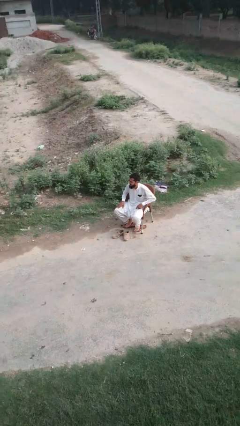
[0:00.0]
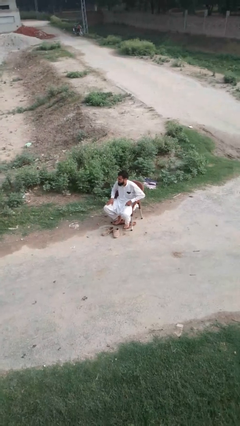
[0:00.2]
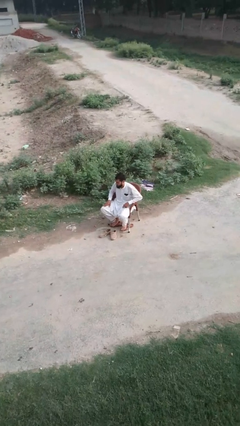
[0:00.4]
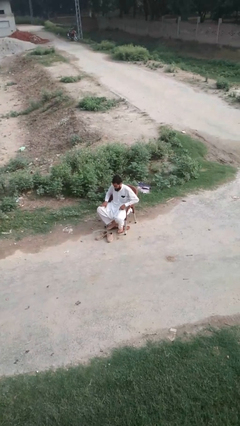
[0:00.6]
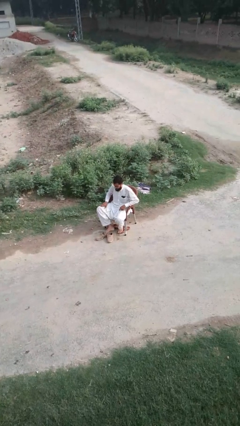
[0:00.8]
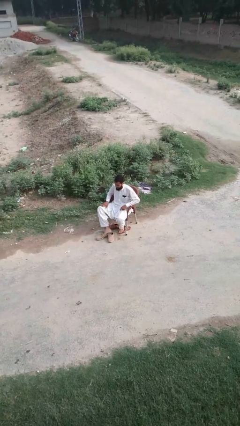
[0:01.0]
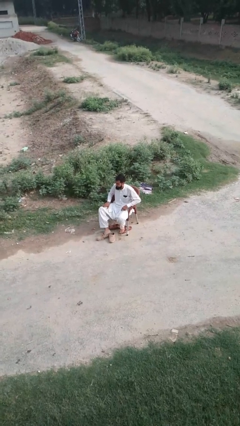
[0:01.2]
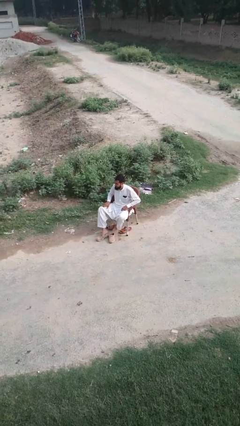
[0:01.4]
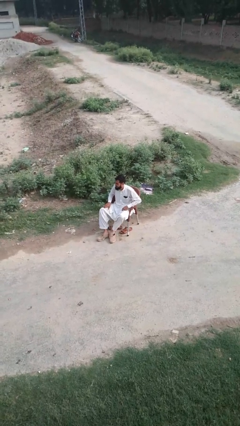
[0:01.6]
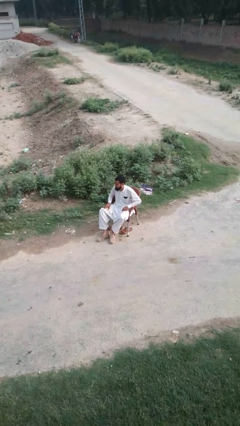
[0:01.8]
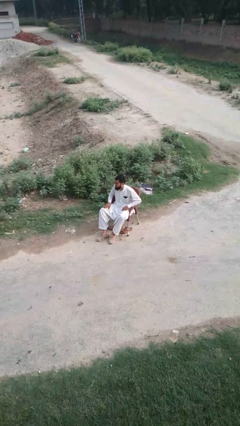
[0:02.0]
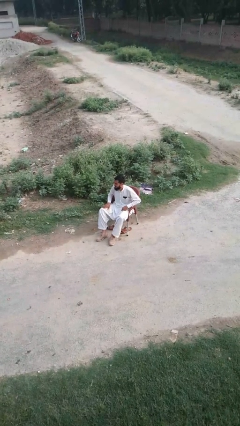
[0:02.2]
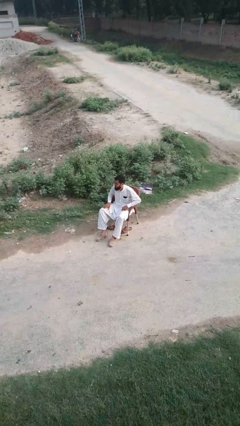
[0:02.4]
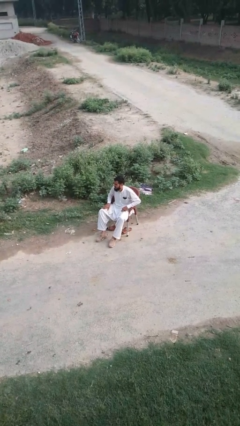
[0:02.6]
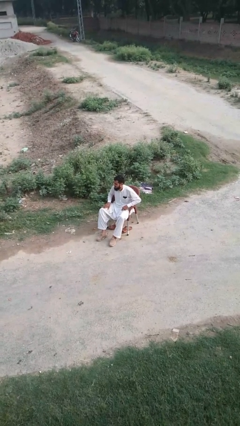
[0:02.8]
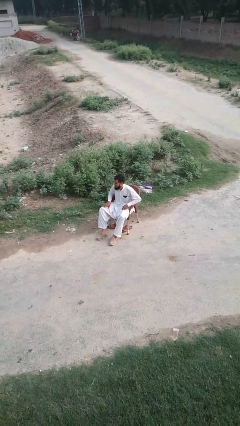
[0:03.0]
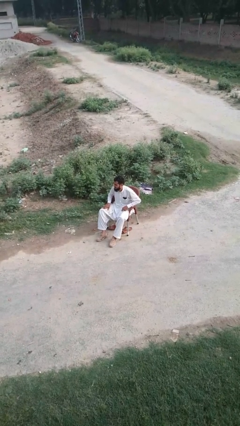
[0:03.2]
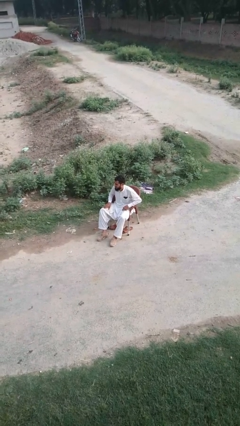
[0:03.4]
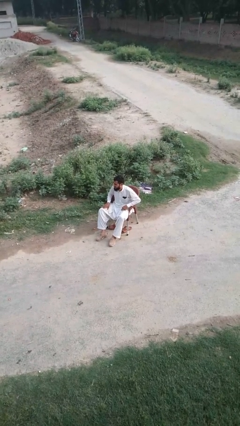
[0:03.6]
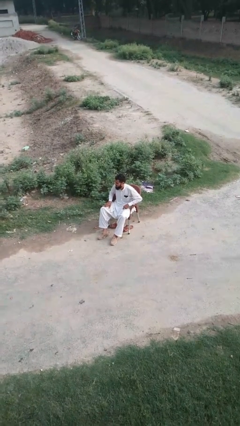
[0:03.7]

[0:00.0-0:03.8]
person puts on shoes

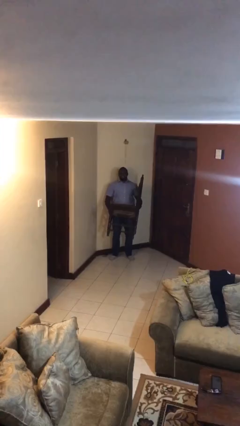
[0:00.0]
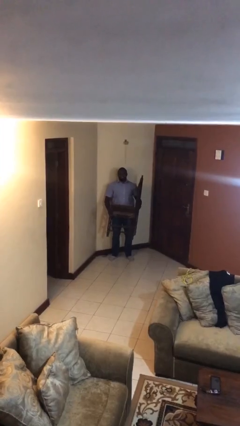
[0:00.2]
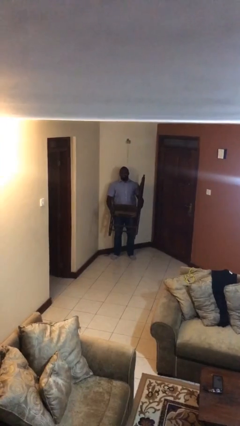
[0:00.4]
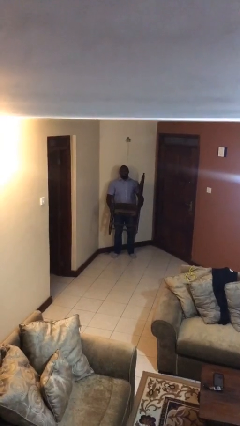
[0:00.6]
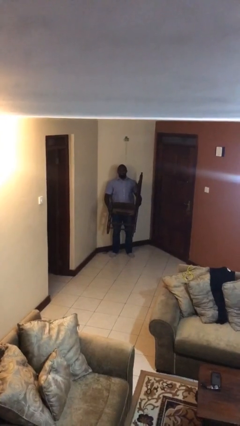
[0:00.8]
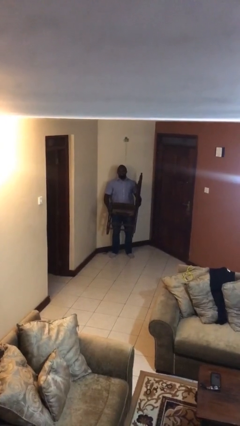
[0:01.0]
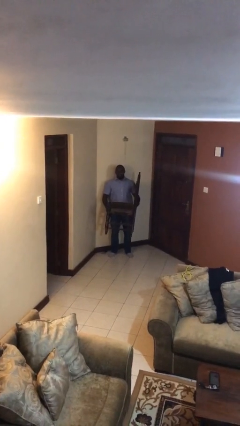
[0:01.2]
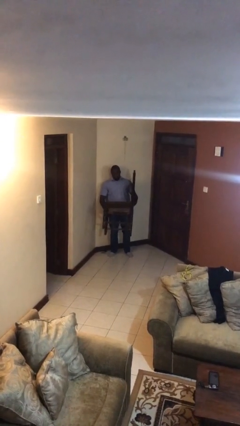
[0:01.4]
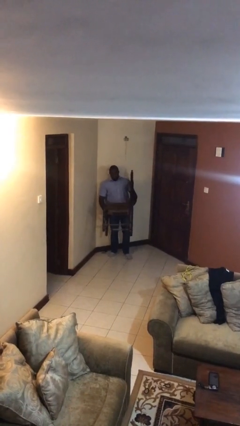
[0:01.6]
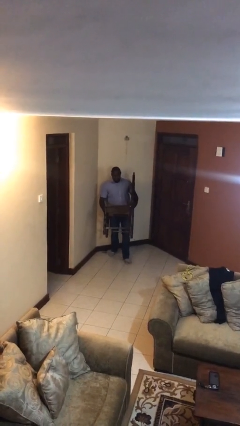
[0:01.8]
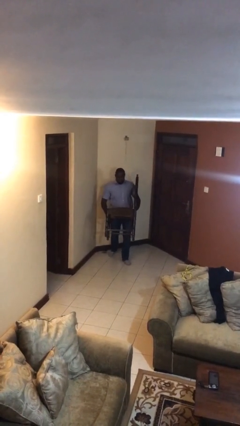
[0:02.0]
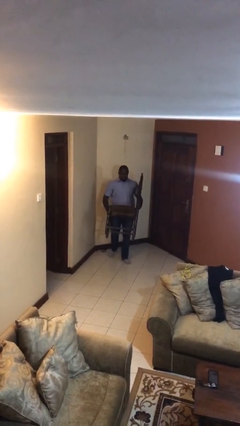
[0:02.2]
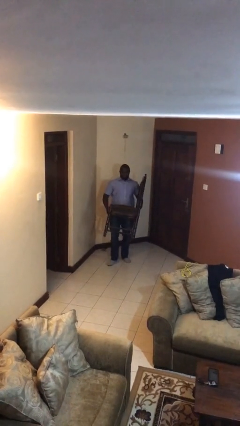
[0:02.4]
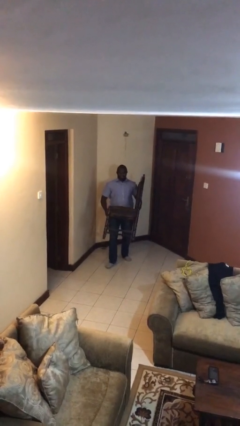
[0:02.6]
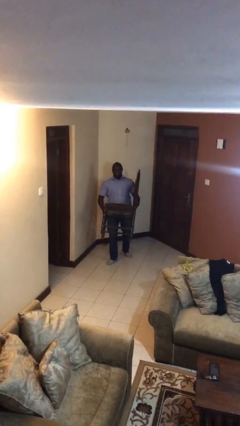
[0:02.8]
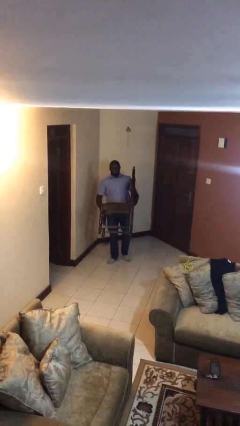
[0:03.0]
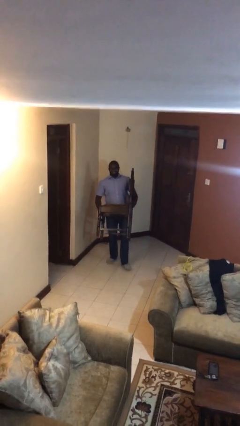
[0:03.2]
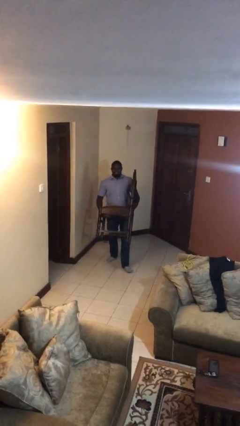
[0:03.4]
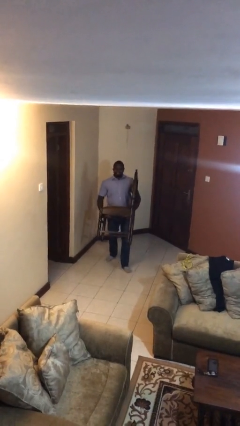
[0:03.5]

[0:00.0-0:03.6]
person carries heavy object

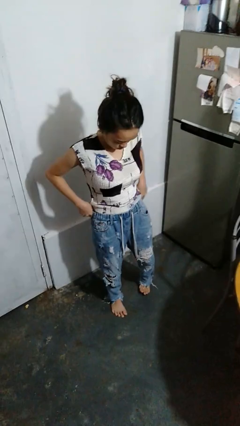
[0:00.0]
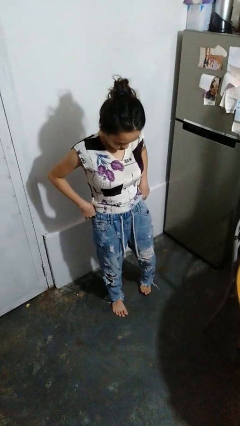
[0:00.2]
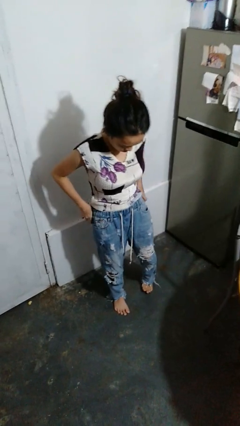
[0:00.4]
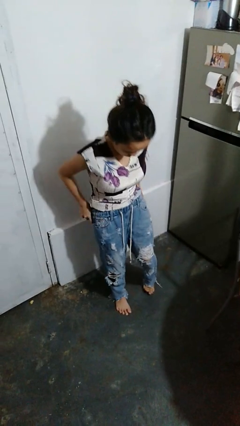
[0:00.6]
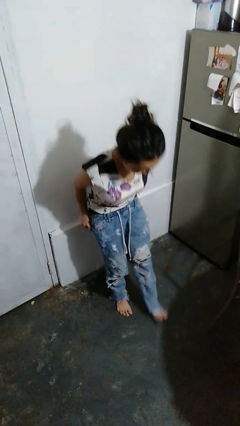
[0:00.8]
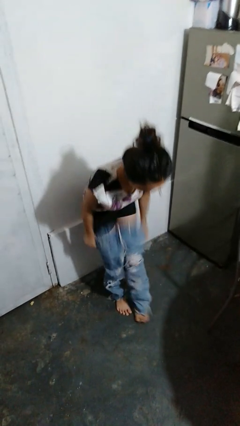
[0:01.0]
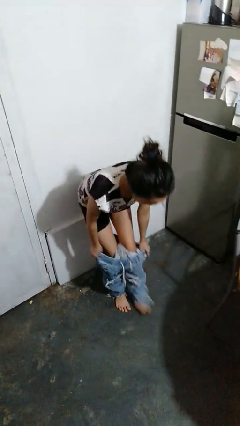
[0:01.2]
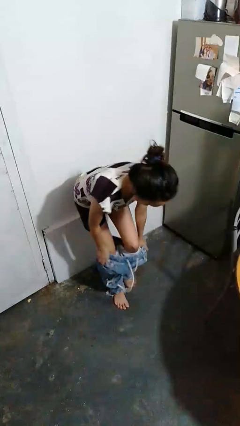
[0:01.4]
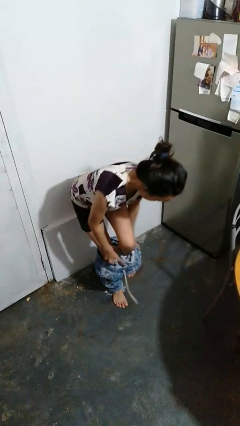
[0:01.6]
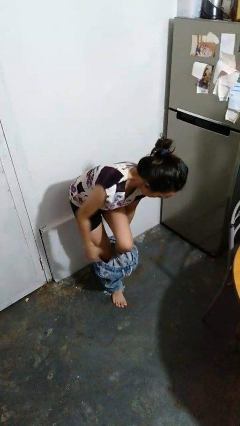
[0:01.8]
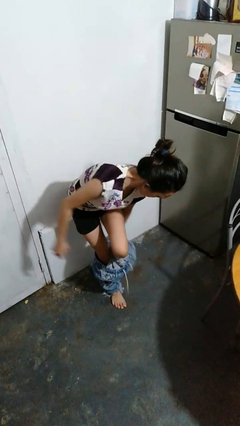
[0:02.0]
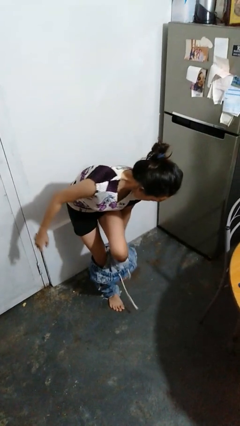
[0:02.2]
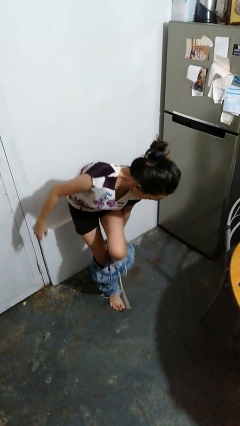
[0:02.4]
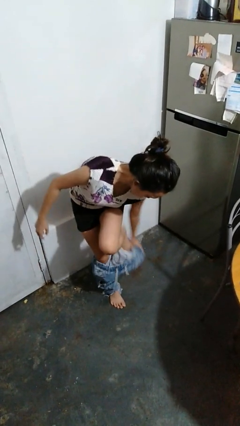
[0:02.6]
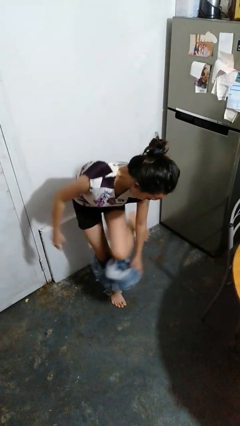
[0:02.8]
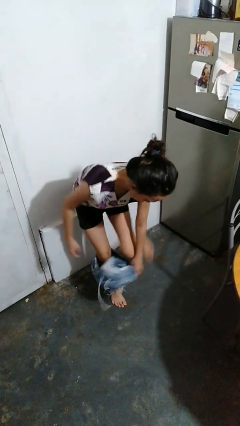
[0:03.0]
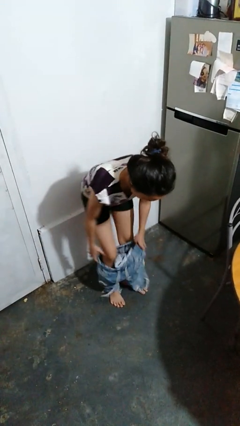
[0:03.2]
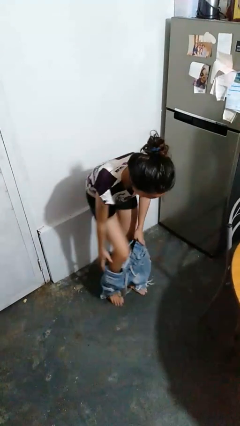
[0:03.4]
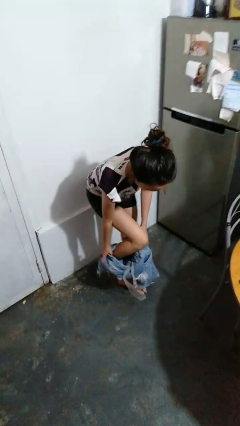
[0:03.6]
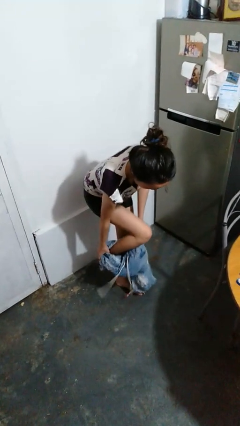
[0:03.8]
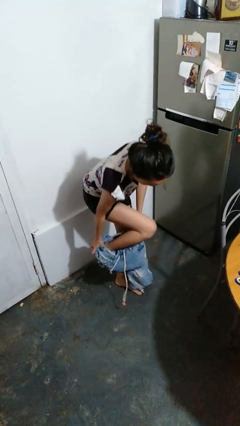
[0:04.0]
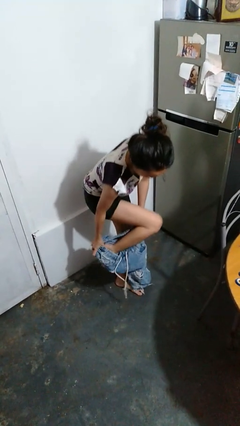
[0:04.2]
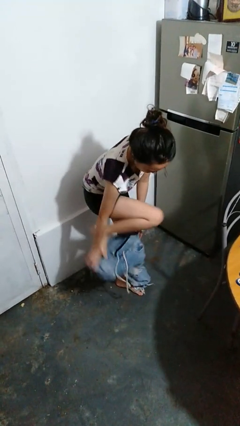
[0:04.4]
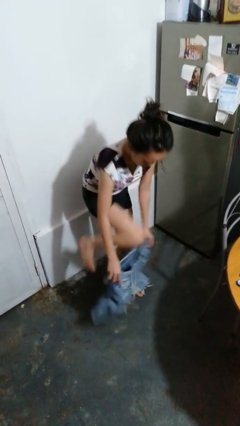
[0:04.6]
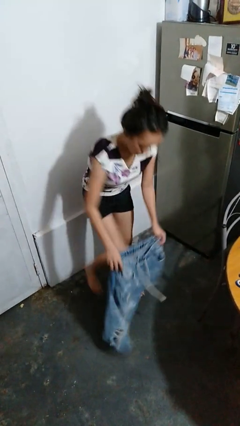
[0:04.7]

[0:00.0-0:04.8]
person takes off pants

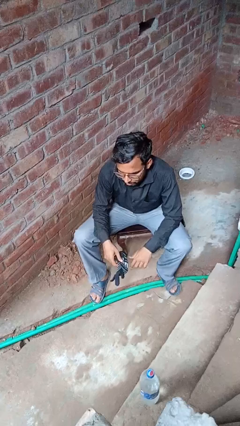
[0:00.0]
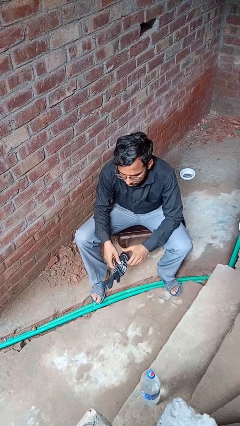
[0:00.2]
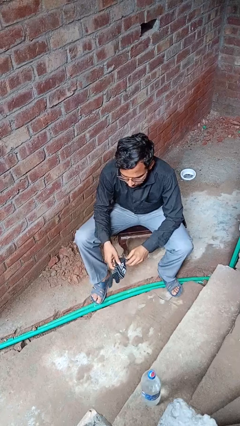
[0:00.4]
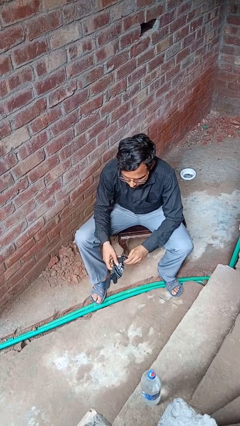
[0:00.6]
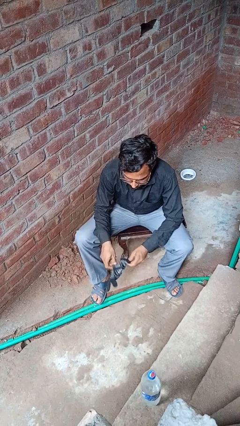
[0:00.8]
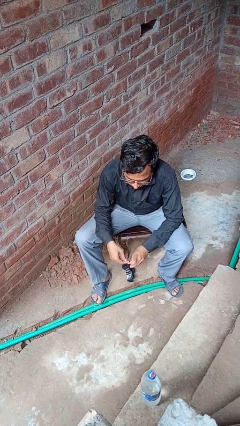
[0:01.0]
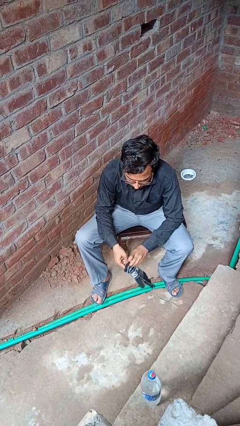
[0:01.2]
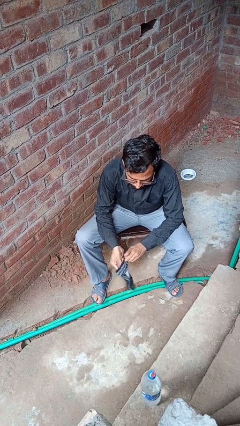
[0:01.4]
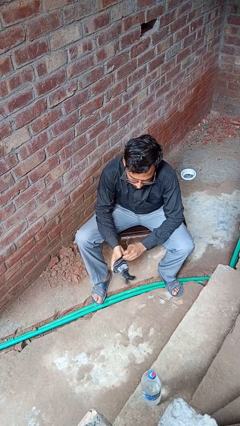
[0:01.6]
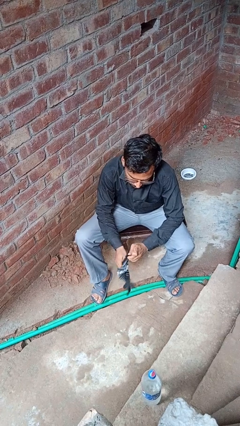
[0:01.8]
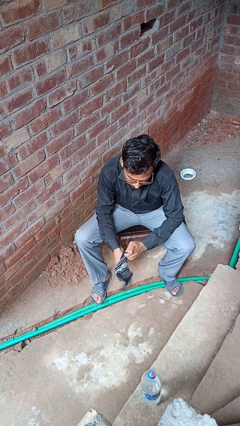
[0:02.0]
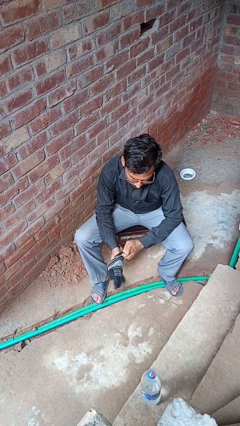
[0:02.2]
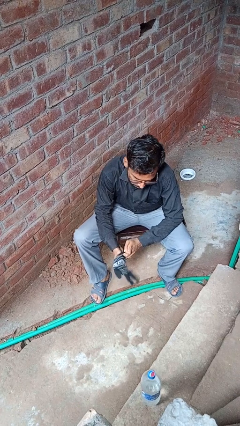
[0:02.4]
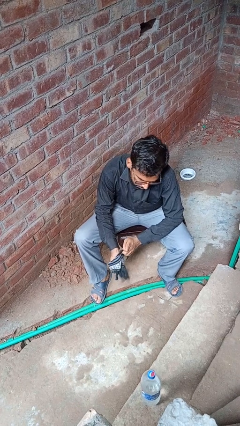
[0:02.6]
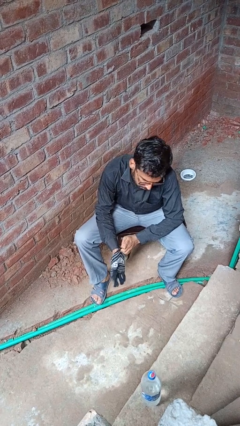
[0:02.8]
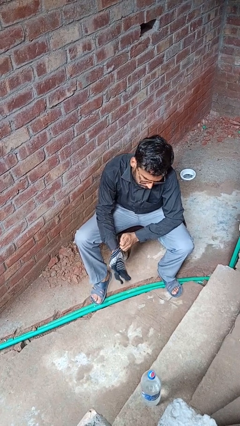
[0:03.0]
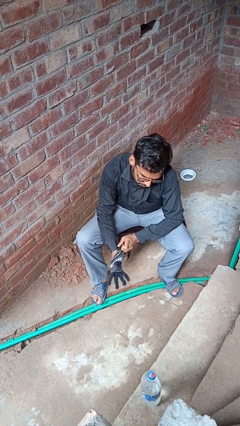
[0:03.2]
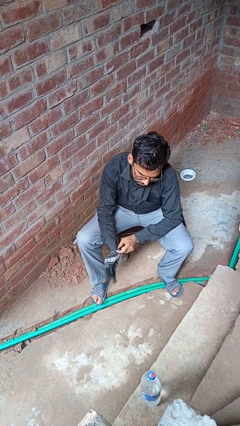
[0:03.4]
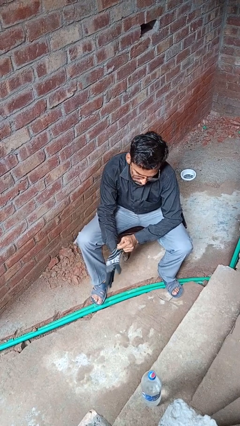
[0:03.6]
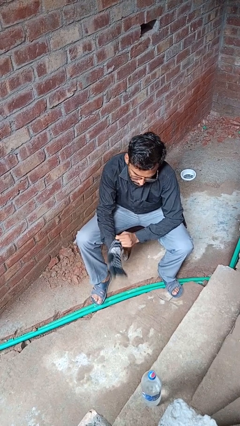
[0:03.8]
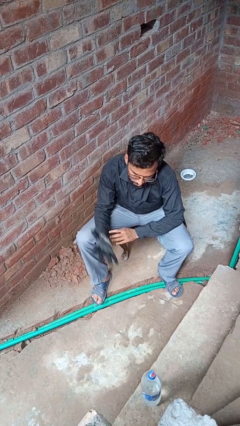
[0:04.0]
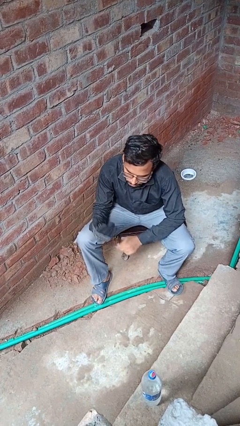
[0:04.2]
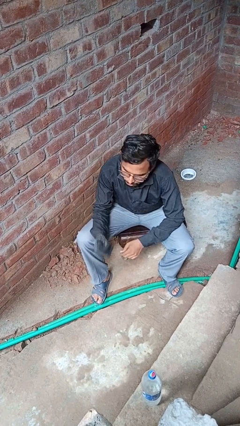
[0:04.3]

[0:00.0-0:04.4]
person puts on gloves

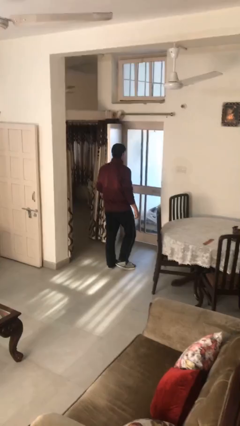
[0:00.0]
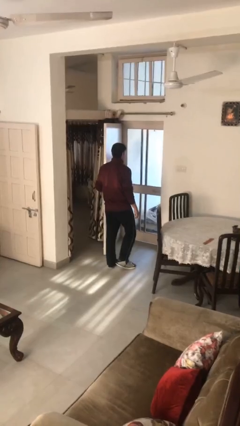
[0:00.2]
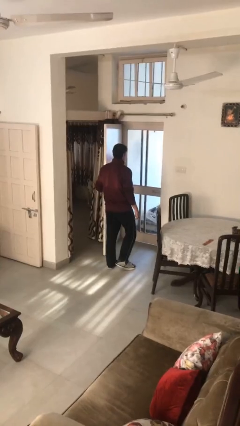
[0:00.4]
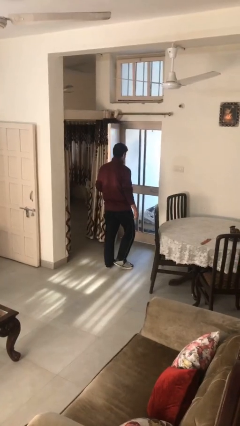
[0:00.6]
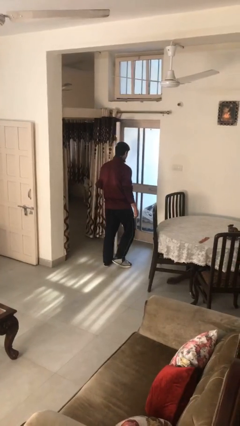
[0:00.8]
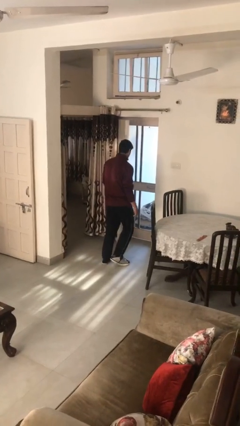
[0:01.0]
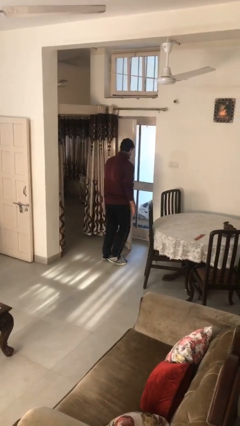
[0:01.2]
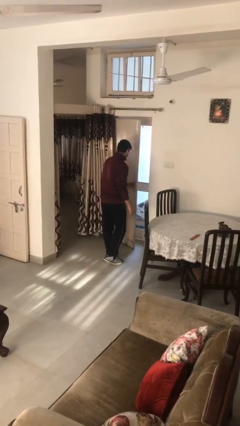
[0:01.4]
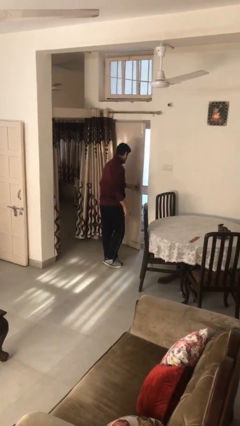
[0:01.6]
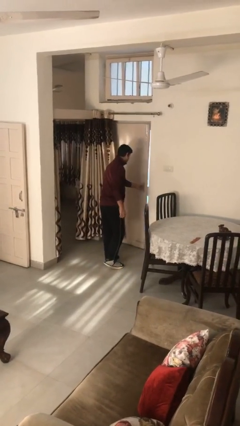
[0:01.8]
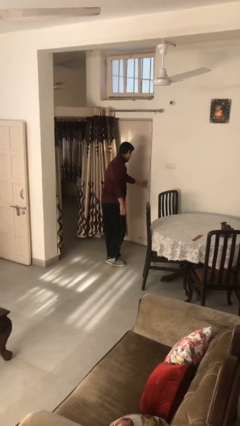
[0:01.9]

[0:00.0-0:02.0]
person closes facility door
